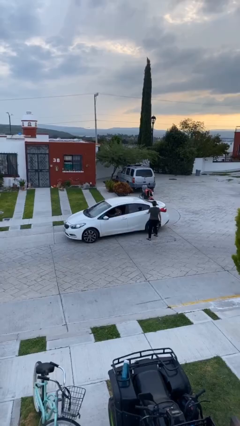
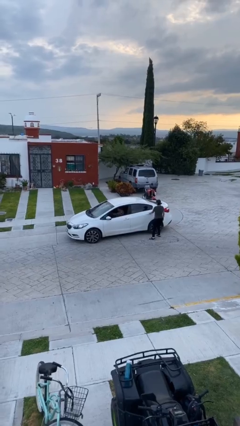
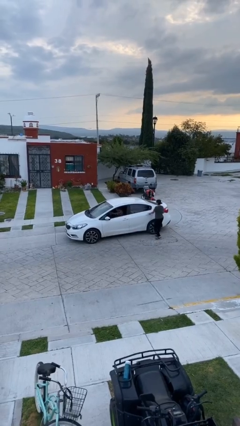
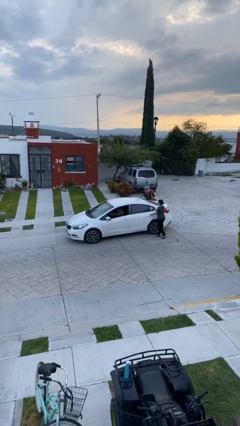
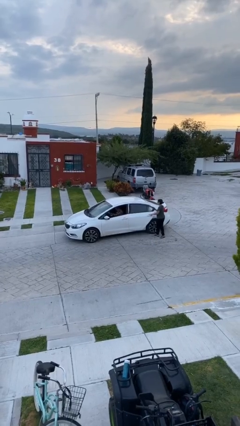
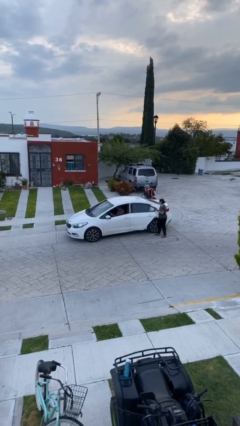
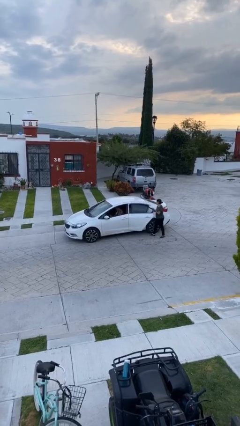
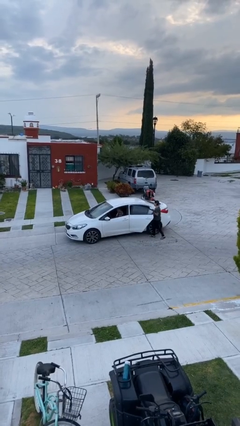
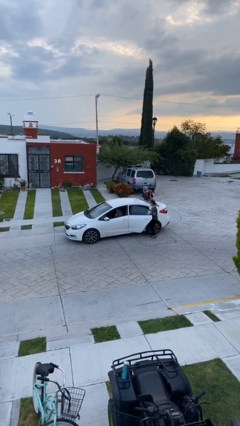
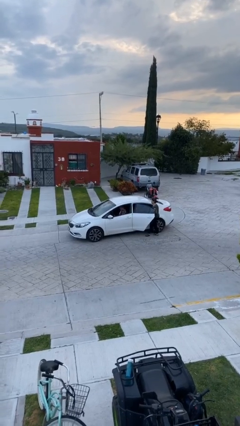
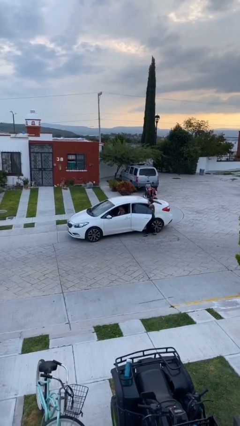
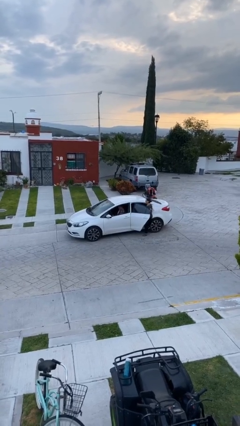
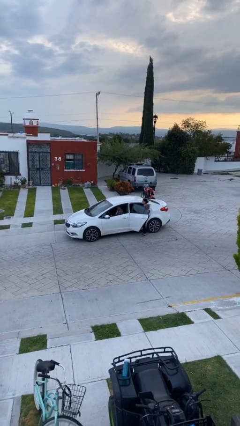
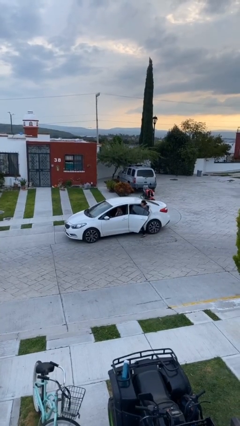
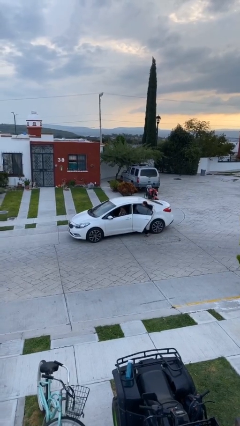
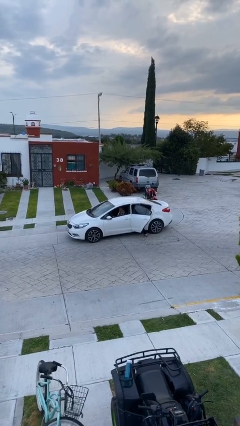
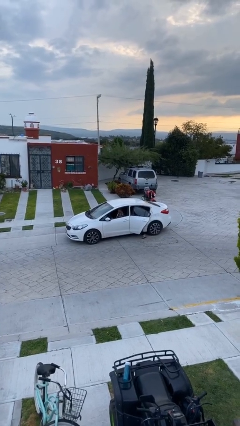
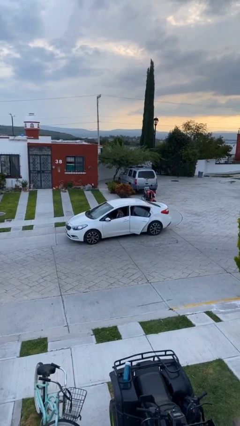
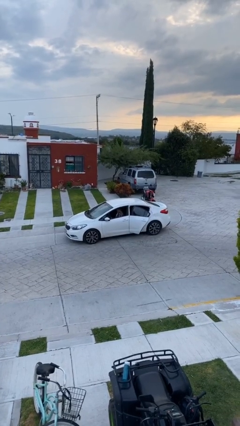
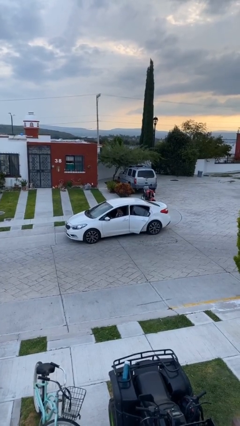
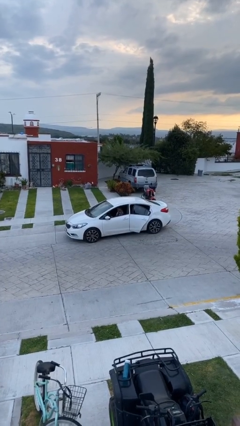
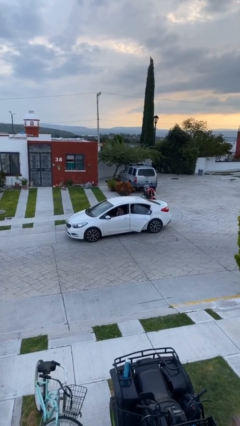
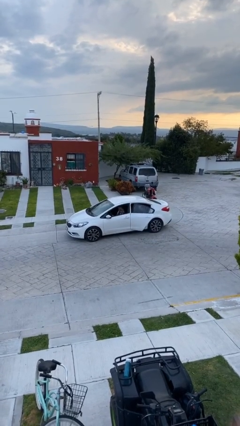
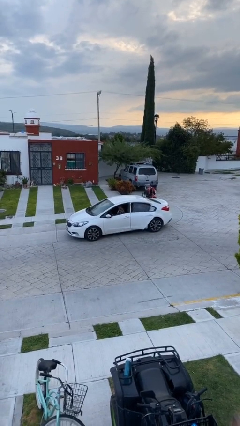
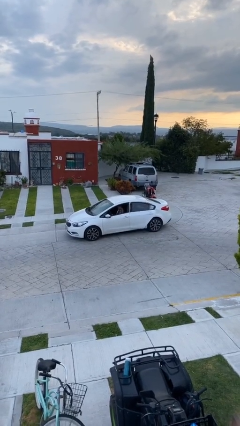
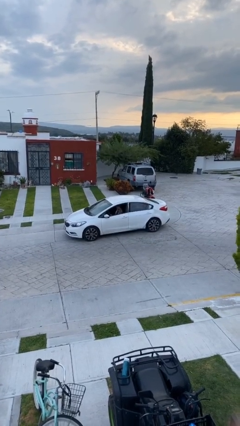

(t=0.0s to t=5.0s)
car picks up person

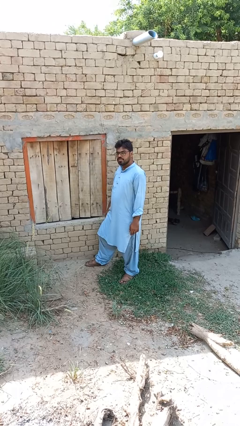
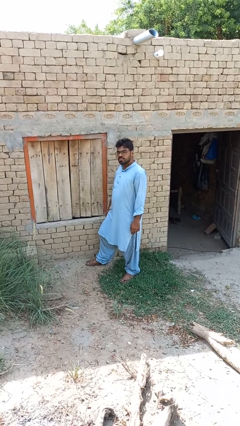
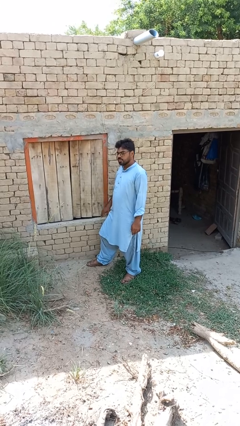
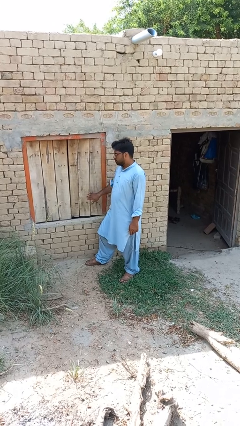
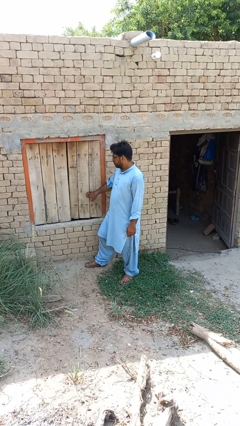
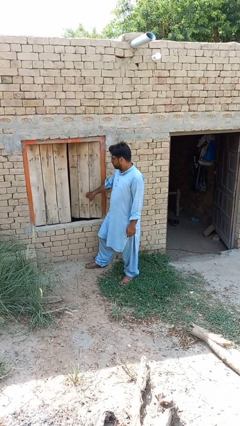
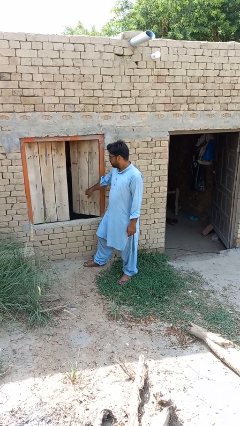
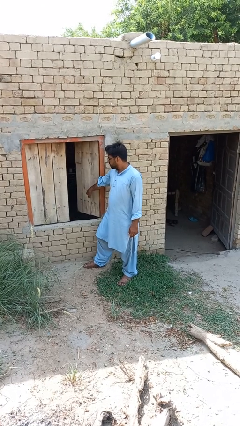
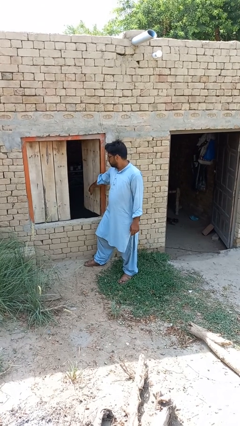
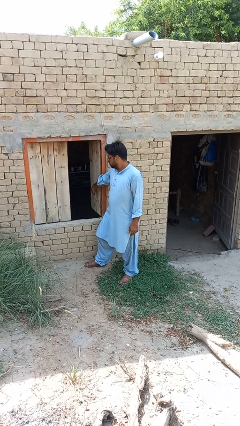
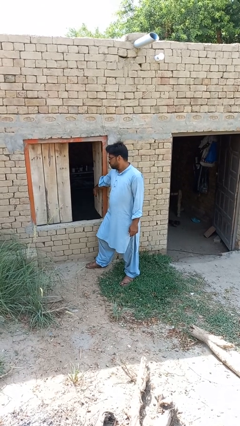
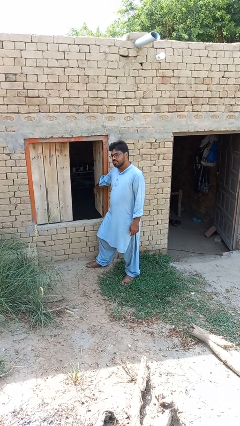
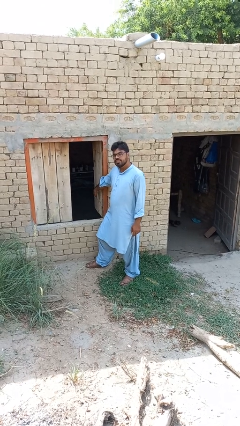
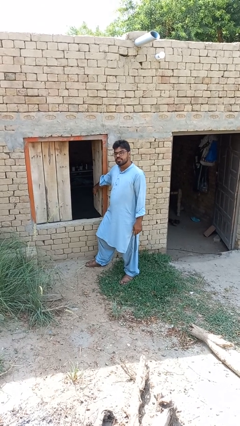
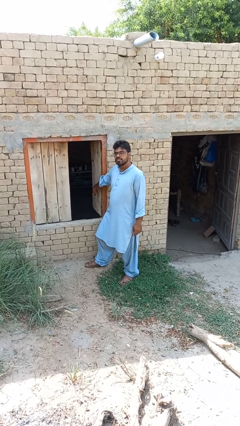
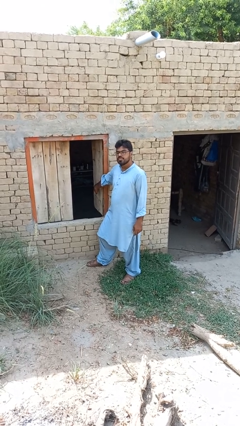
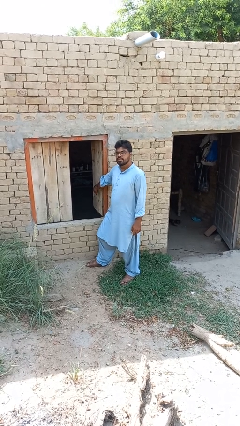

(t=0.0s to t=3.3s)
person opens home window

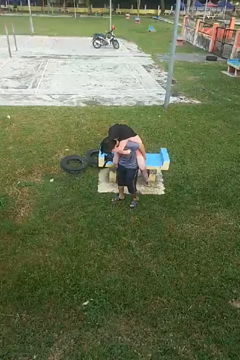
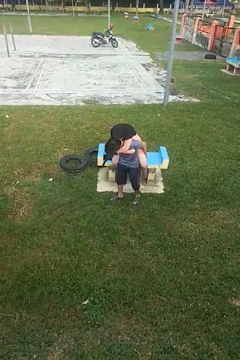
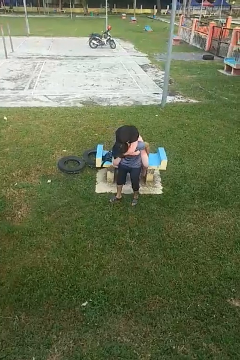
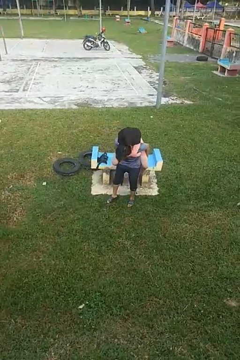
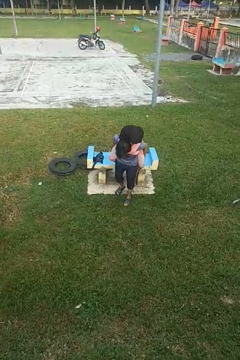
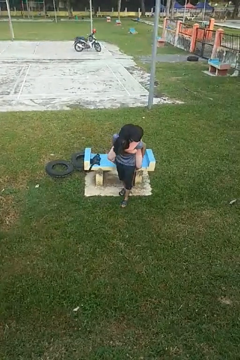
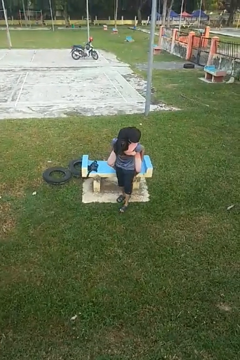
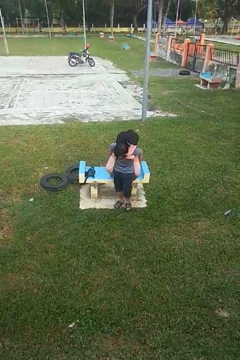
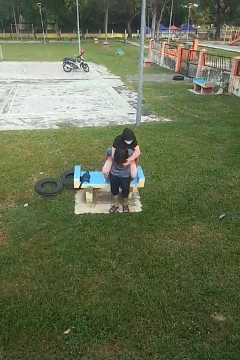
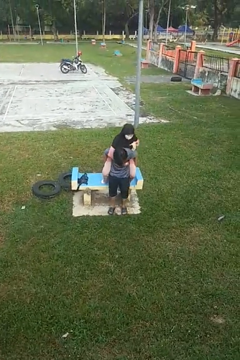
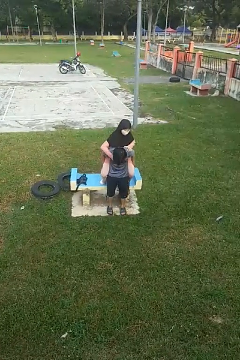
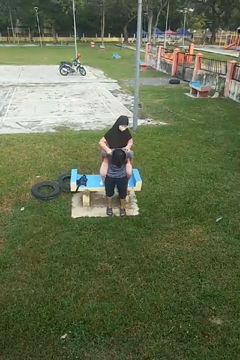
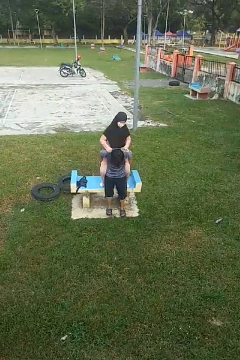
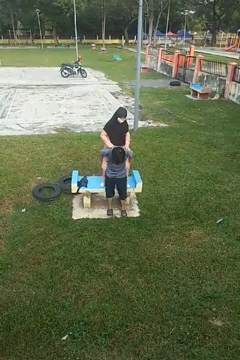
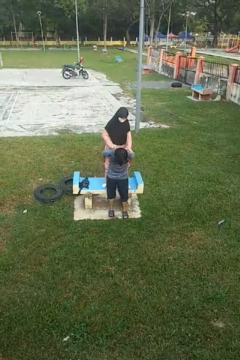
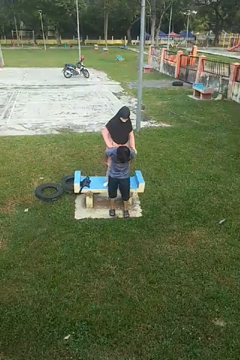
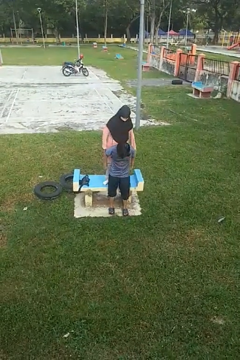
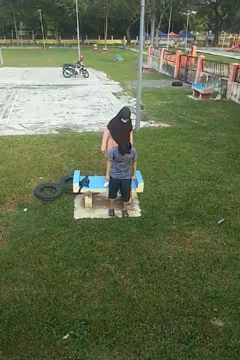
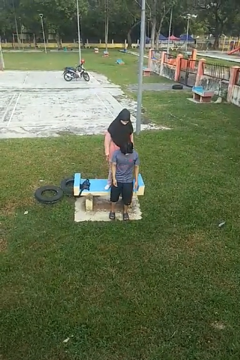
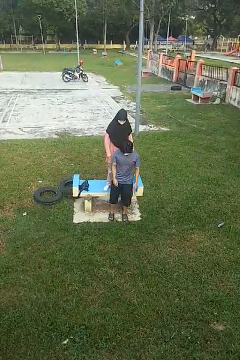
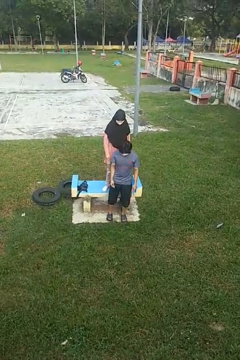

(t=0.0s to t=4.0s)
person puts down person

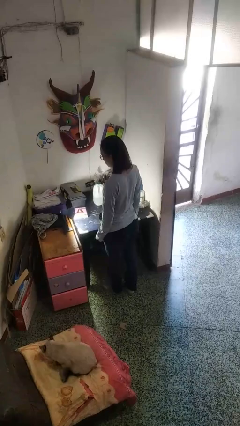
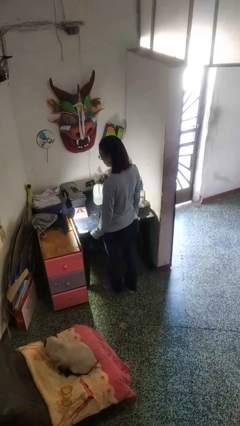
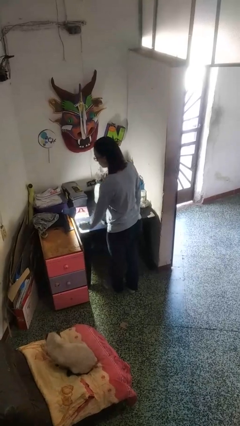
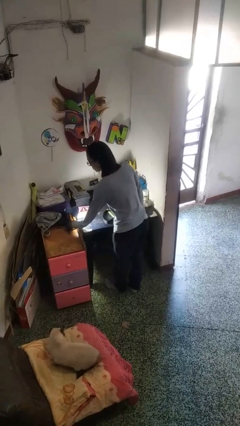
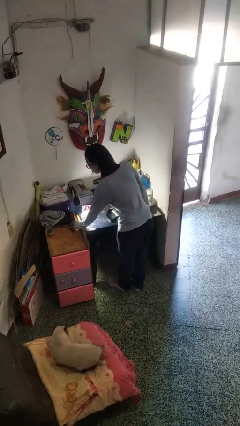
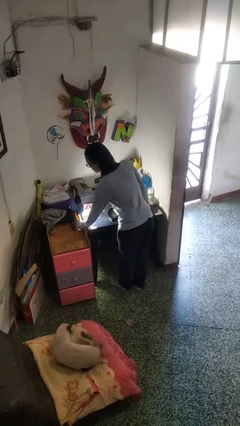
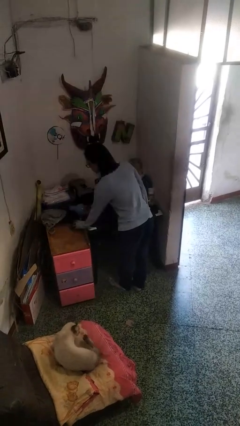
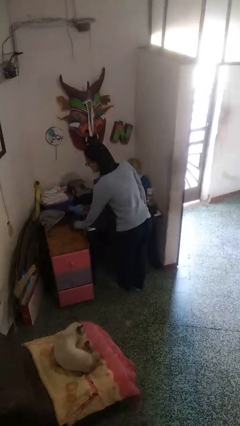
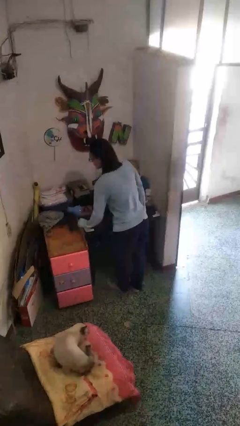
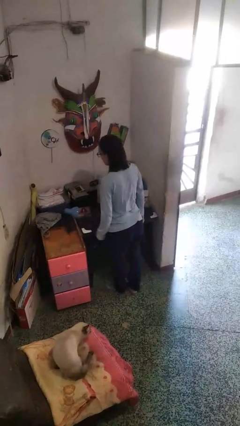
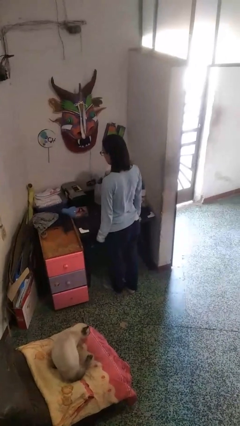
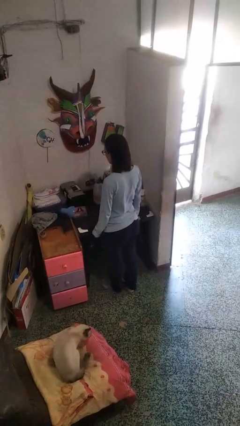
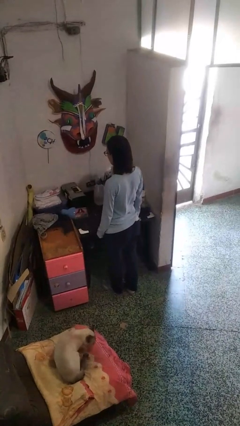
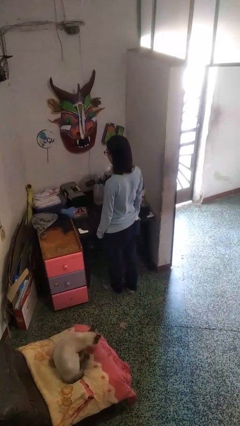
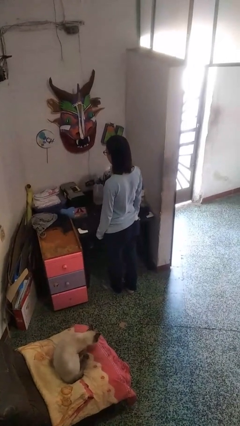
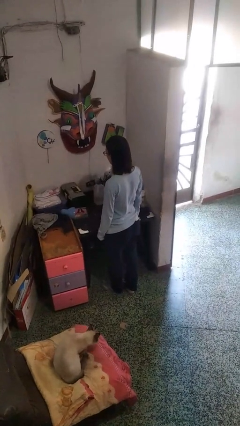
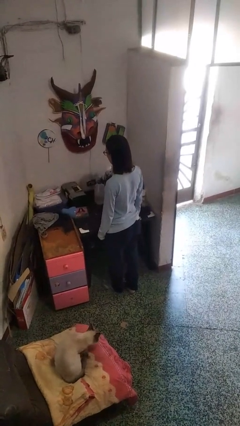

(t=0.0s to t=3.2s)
person turns off lamp

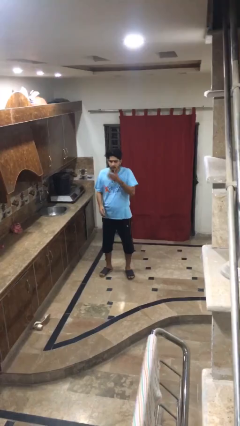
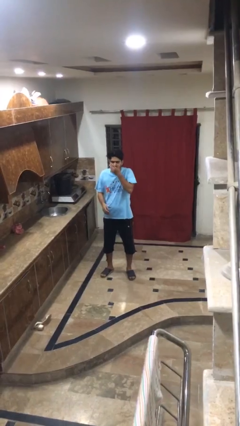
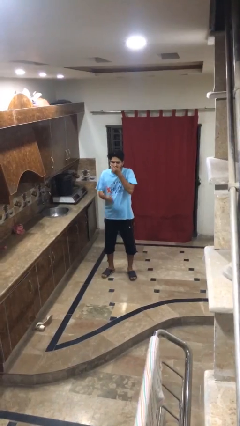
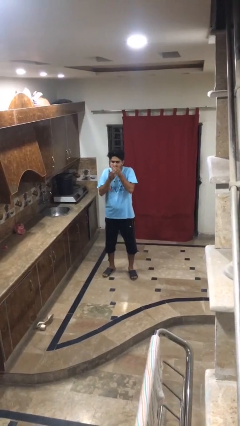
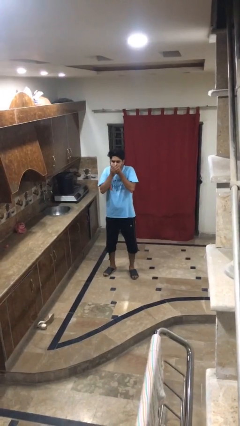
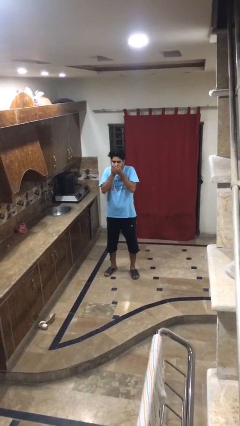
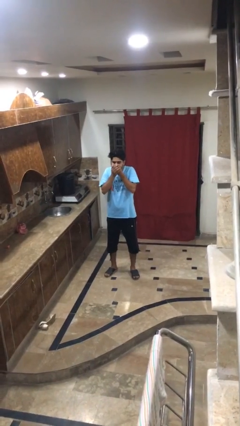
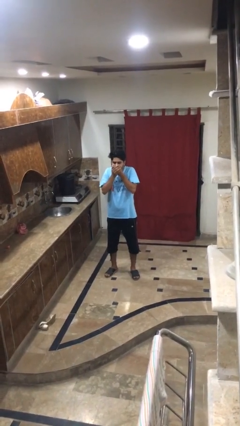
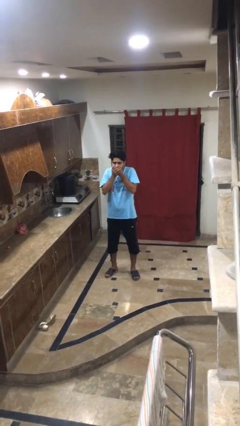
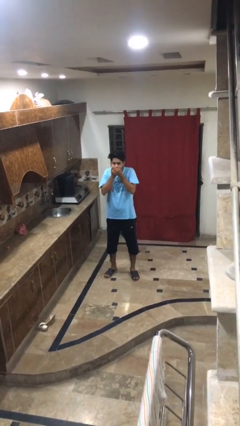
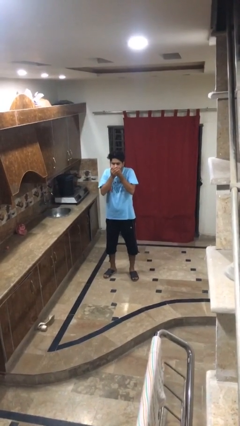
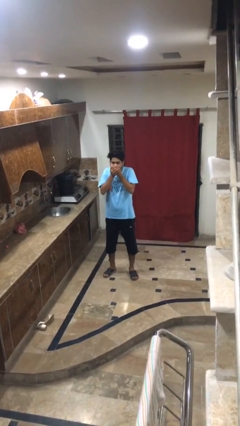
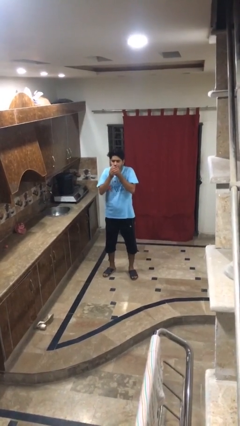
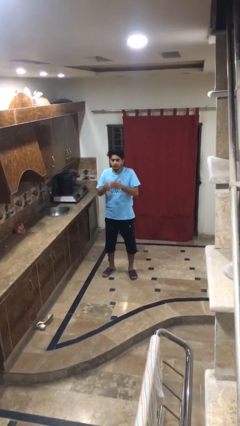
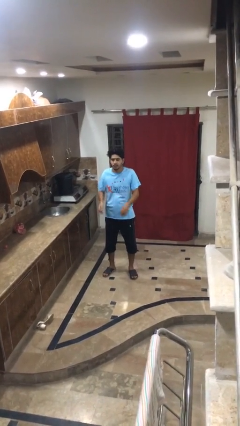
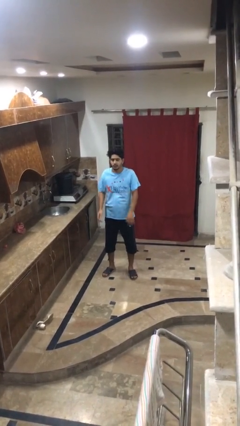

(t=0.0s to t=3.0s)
person sneezes into hand
